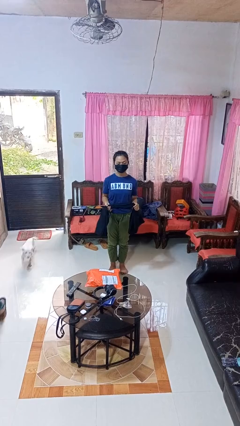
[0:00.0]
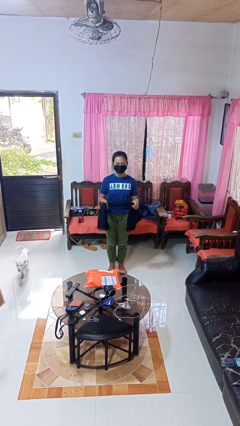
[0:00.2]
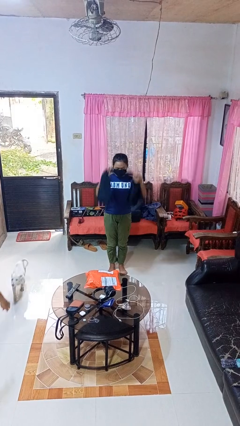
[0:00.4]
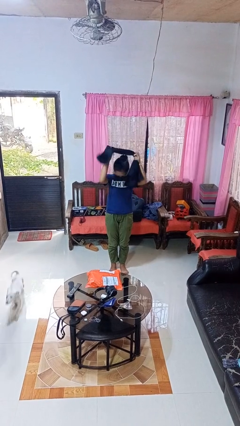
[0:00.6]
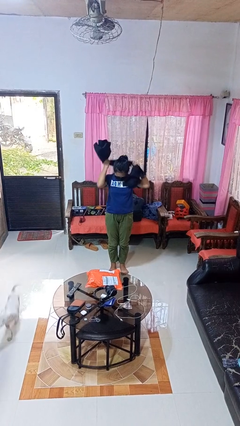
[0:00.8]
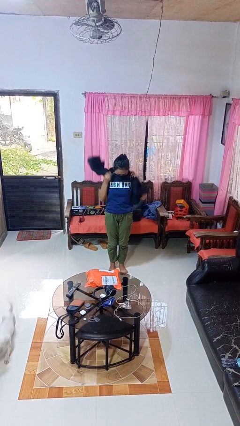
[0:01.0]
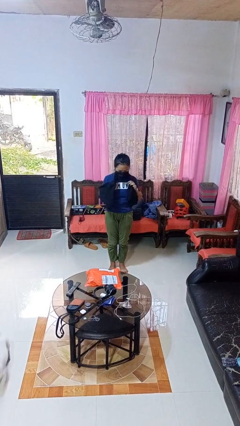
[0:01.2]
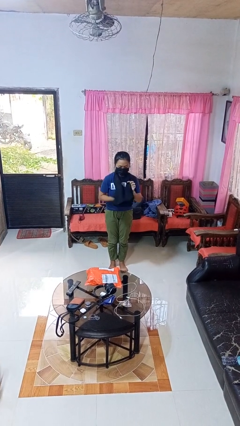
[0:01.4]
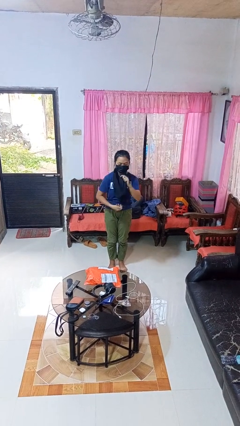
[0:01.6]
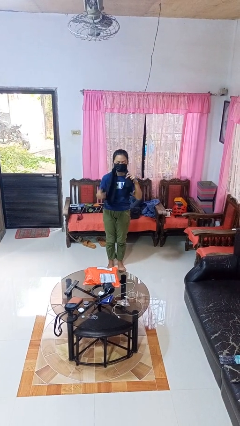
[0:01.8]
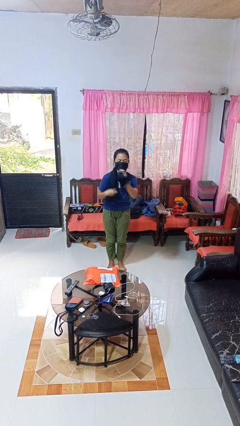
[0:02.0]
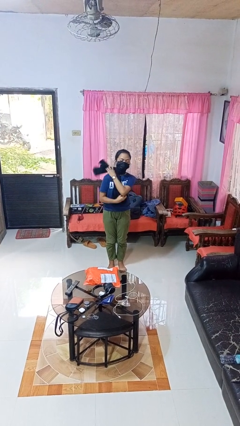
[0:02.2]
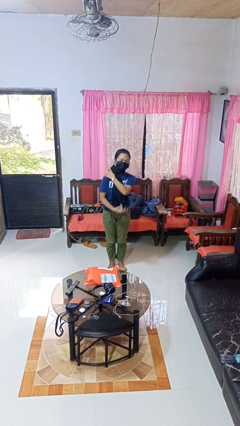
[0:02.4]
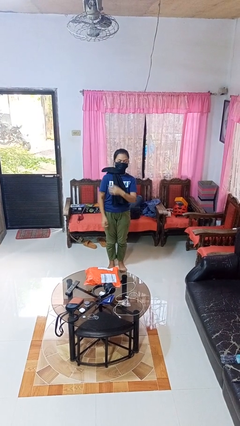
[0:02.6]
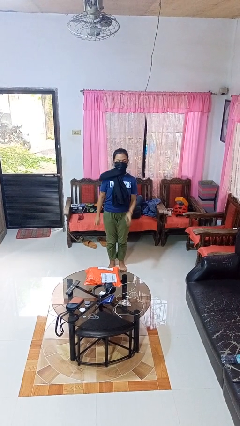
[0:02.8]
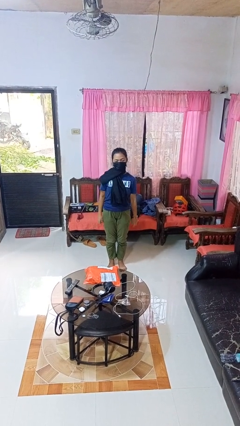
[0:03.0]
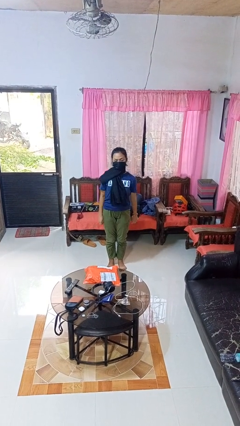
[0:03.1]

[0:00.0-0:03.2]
person puts on scarf

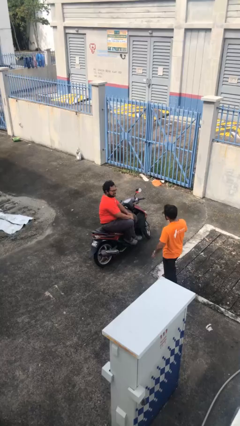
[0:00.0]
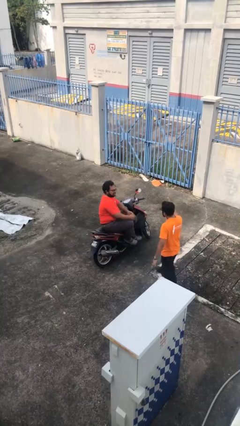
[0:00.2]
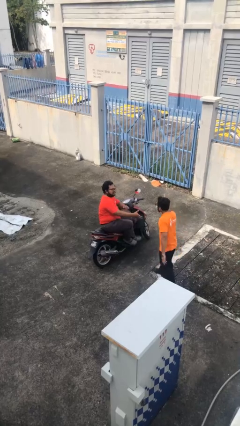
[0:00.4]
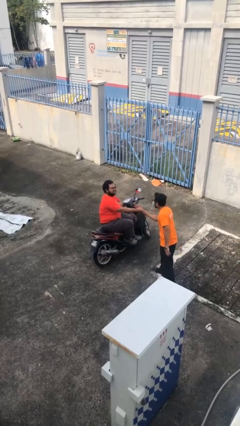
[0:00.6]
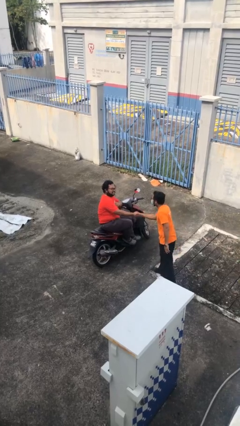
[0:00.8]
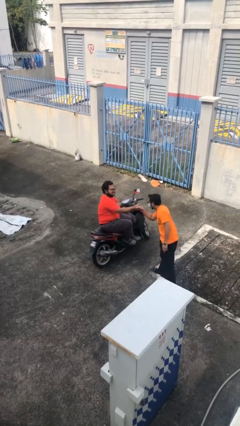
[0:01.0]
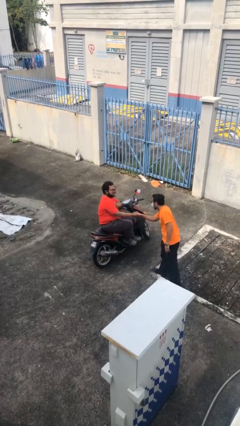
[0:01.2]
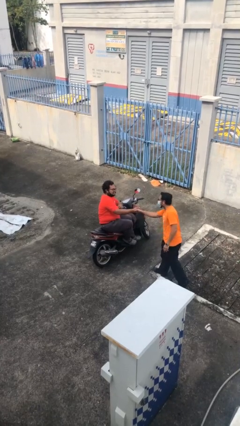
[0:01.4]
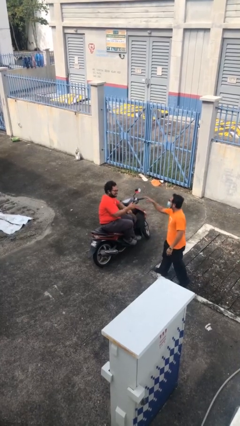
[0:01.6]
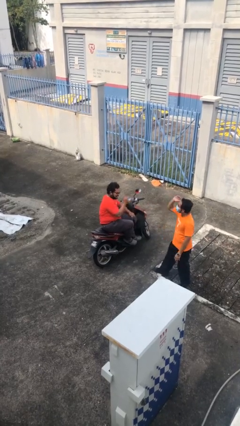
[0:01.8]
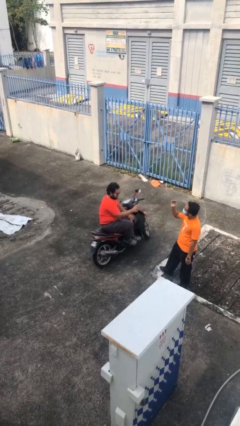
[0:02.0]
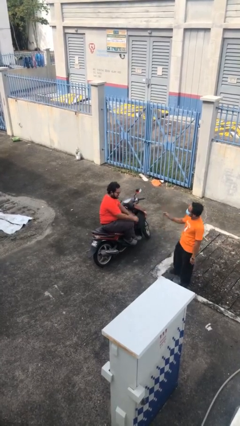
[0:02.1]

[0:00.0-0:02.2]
person shakes hand

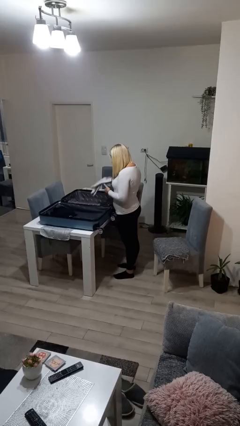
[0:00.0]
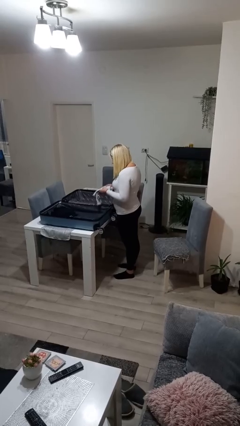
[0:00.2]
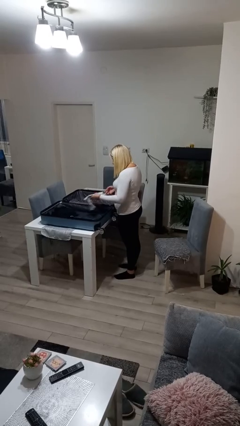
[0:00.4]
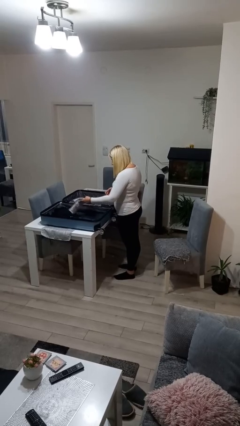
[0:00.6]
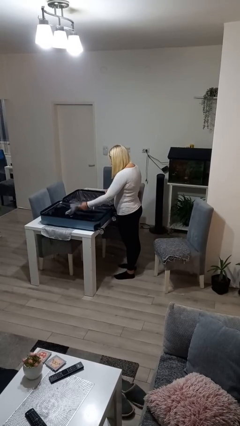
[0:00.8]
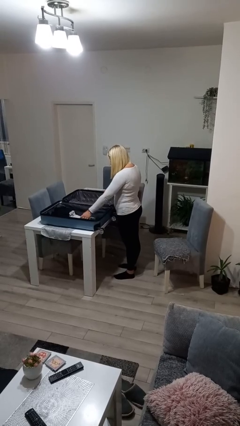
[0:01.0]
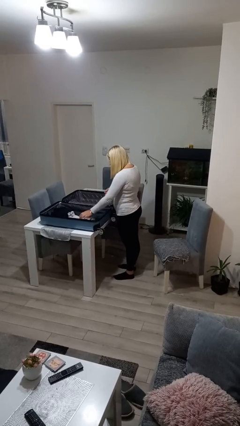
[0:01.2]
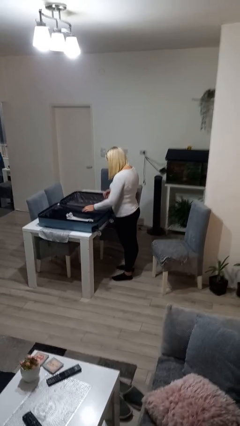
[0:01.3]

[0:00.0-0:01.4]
person loads clothes into suitcase

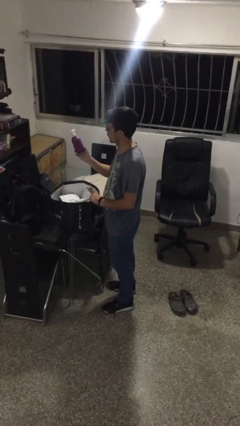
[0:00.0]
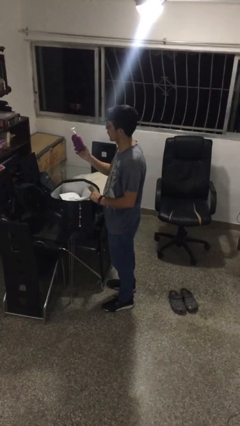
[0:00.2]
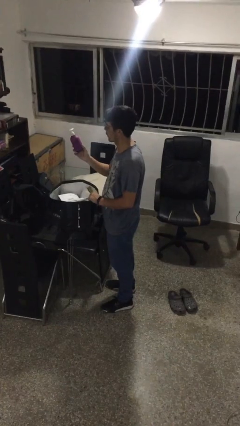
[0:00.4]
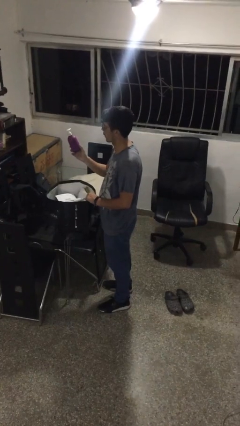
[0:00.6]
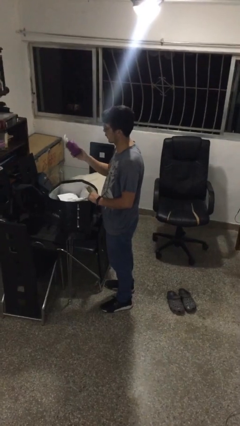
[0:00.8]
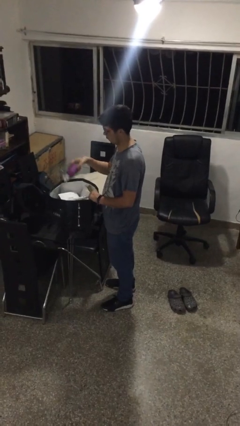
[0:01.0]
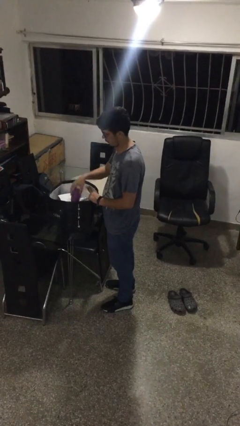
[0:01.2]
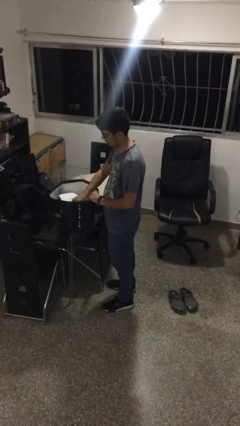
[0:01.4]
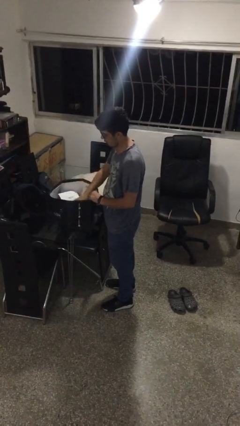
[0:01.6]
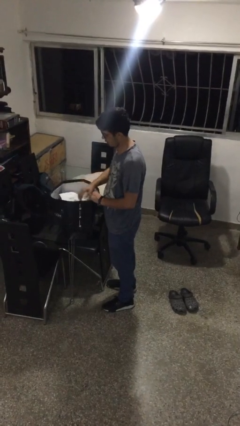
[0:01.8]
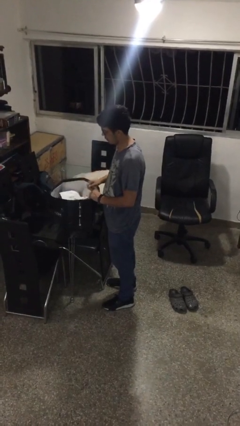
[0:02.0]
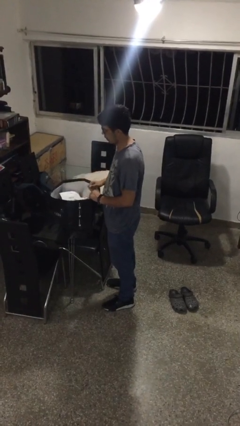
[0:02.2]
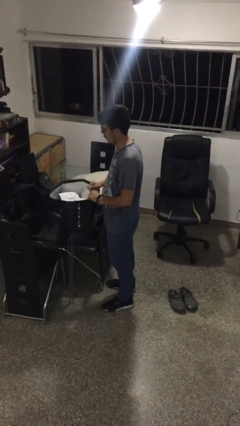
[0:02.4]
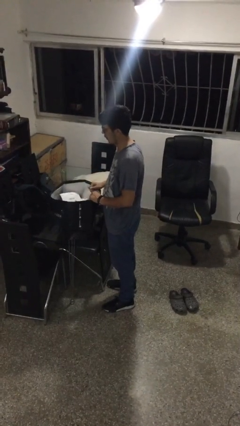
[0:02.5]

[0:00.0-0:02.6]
person puts object into bag

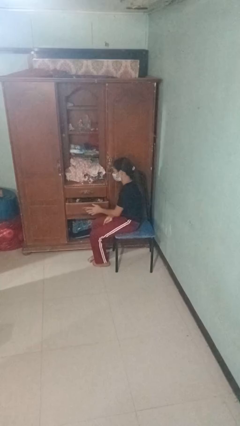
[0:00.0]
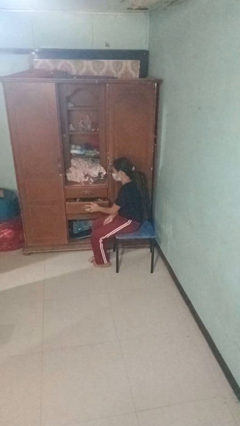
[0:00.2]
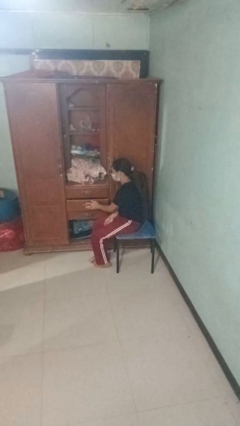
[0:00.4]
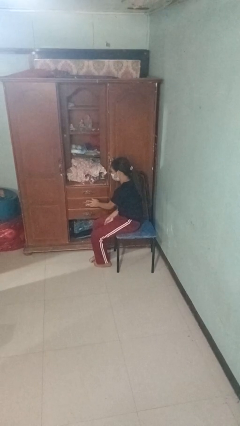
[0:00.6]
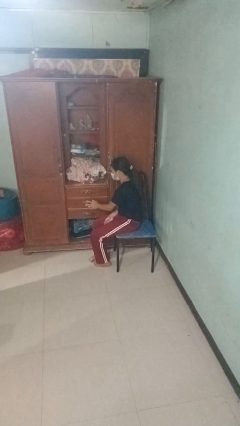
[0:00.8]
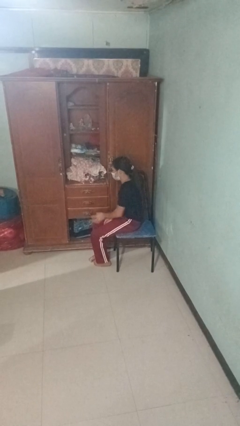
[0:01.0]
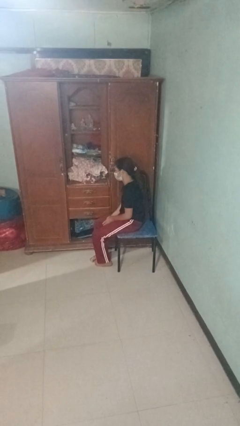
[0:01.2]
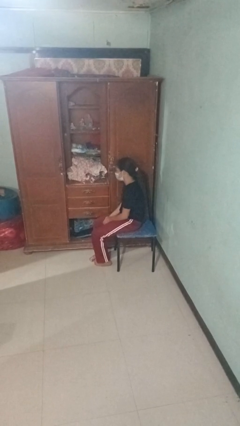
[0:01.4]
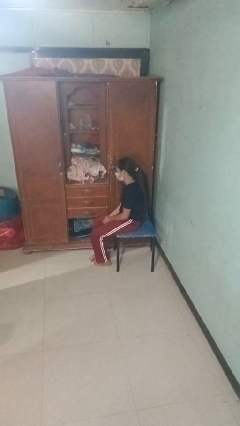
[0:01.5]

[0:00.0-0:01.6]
person closes dresser drawer

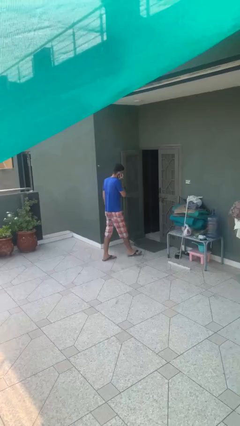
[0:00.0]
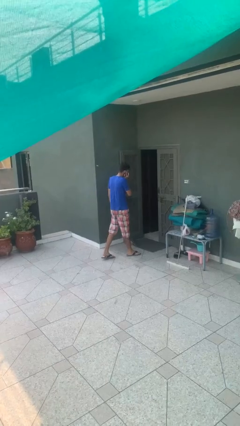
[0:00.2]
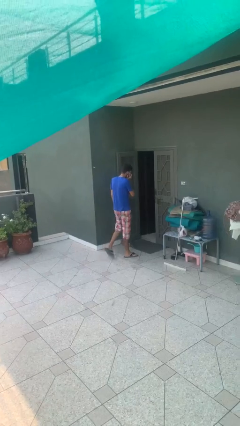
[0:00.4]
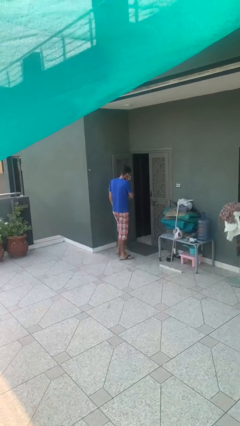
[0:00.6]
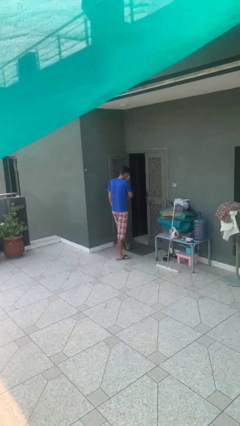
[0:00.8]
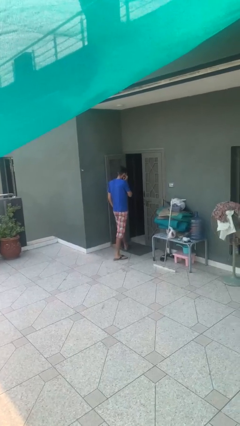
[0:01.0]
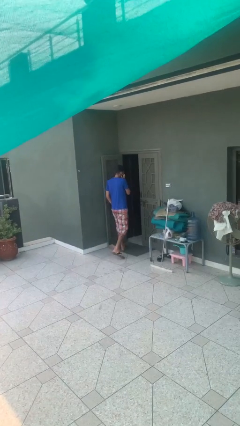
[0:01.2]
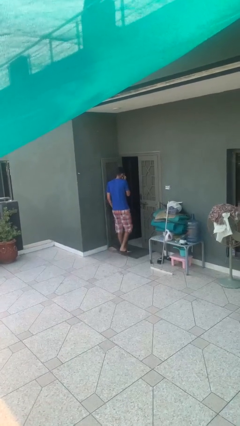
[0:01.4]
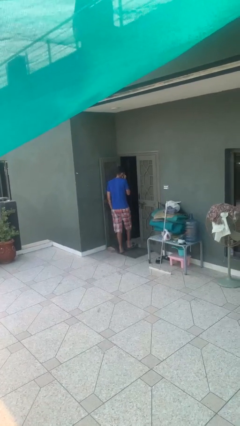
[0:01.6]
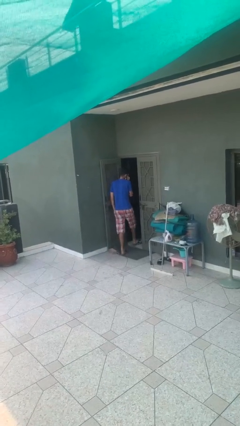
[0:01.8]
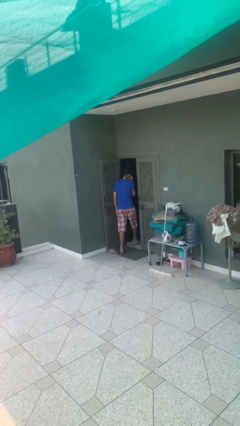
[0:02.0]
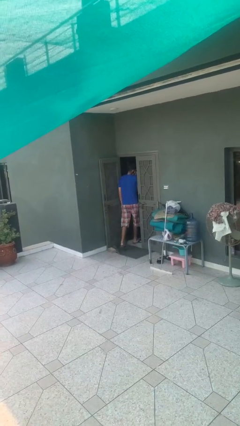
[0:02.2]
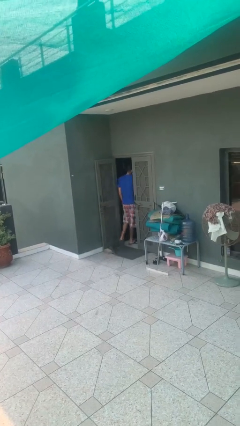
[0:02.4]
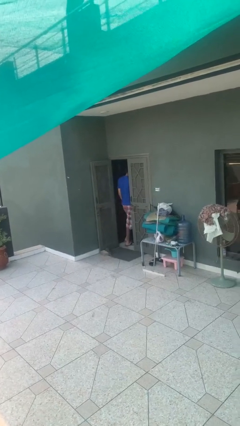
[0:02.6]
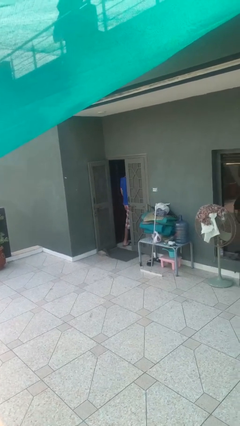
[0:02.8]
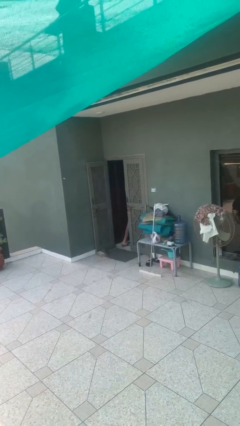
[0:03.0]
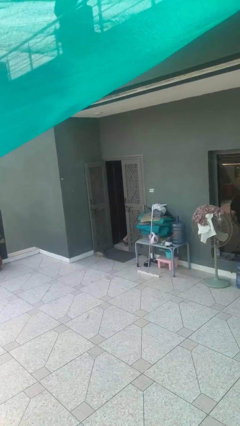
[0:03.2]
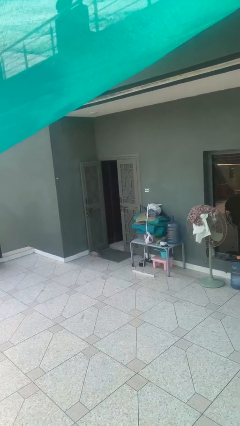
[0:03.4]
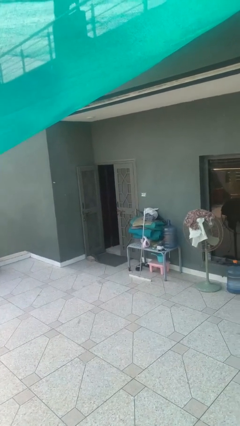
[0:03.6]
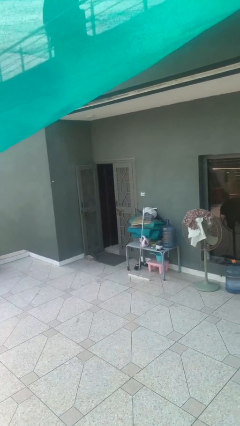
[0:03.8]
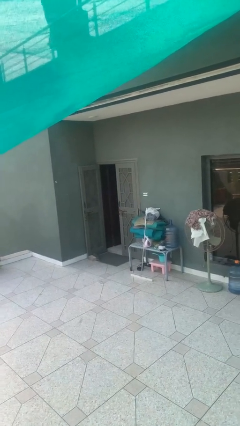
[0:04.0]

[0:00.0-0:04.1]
person exits scene through structure

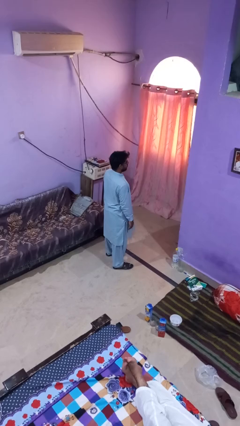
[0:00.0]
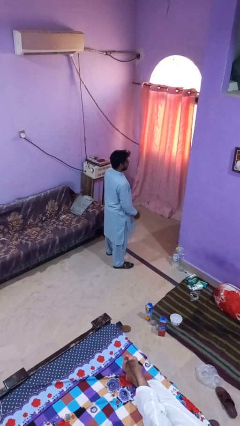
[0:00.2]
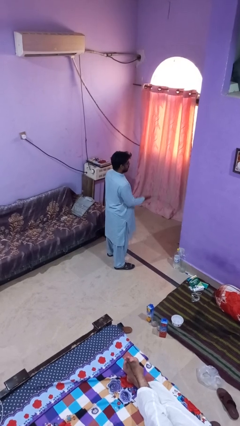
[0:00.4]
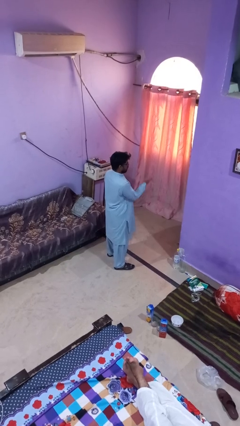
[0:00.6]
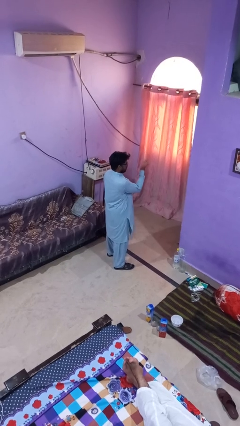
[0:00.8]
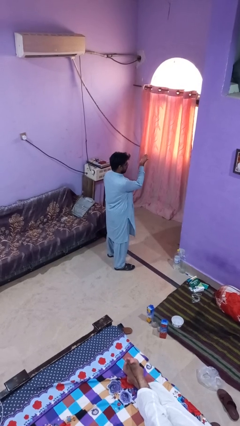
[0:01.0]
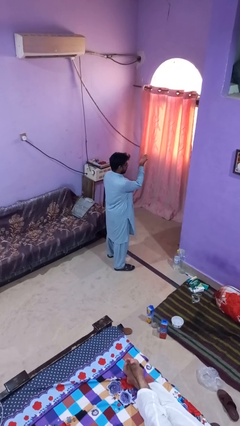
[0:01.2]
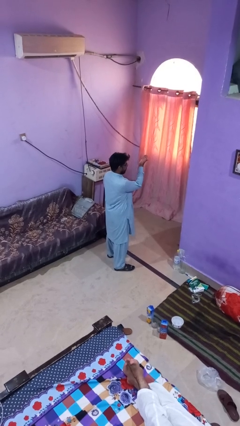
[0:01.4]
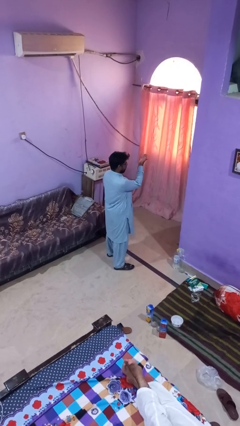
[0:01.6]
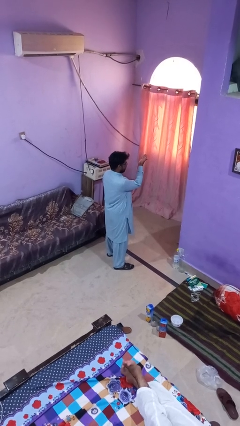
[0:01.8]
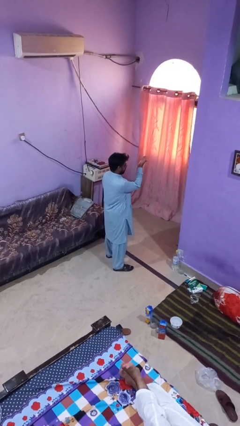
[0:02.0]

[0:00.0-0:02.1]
person gestures swipe up
